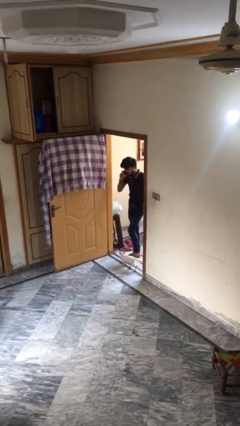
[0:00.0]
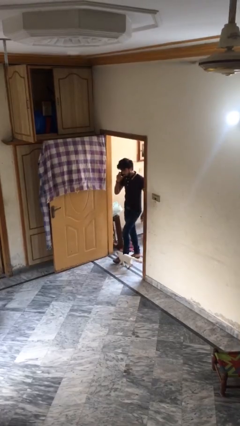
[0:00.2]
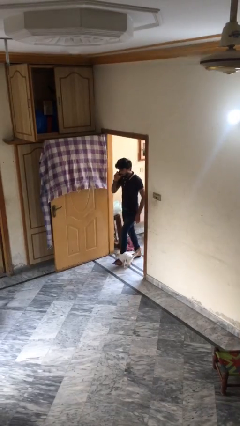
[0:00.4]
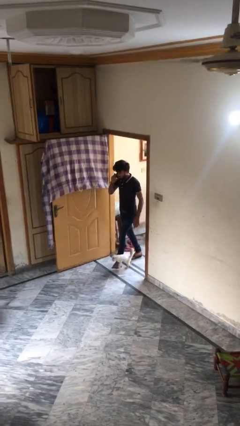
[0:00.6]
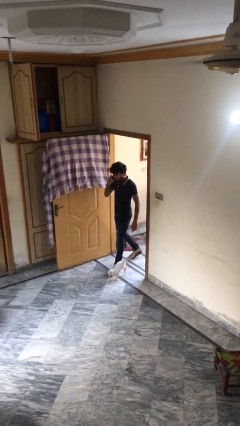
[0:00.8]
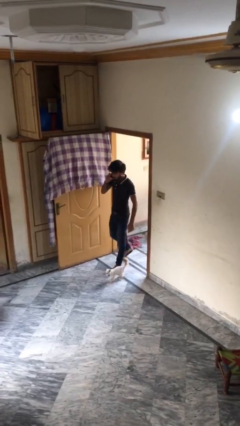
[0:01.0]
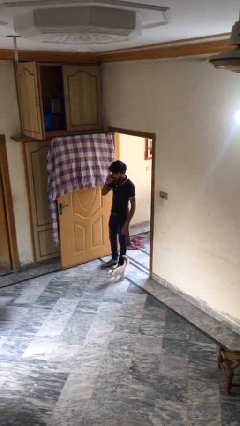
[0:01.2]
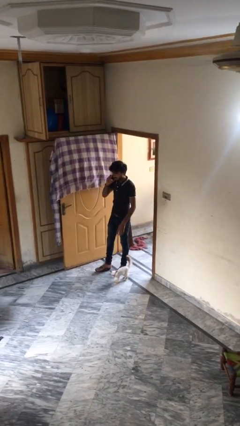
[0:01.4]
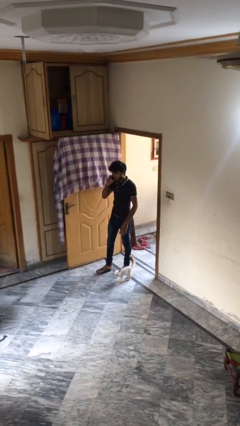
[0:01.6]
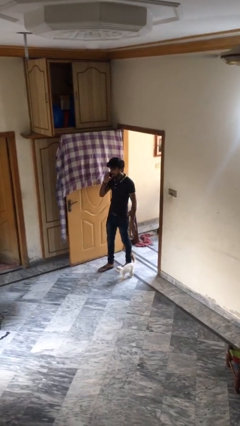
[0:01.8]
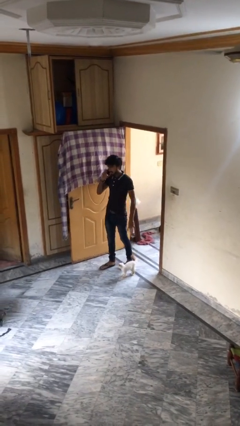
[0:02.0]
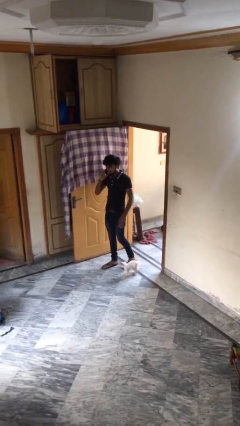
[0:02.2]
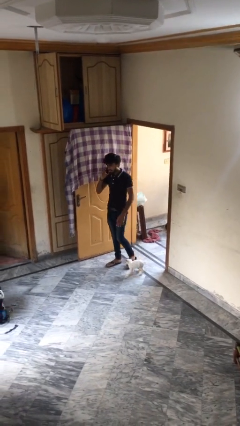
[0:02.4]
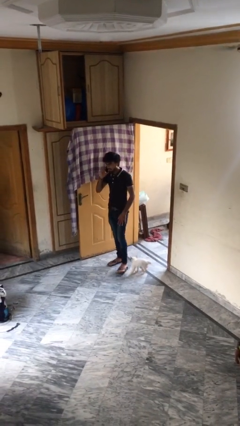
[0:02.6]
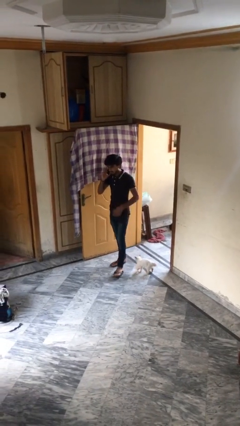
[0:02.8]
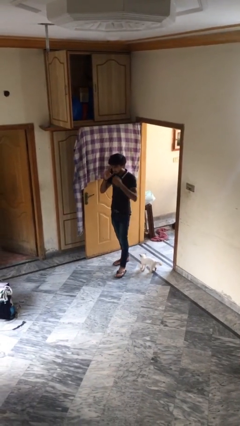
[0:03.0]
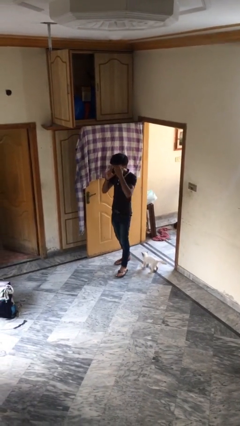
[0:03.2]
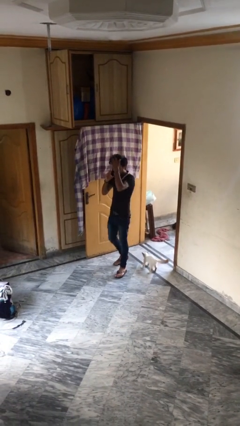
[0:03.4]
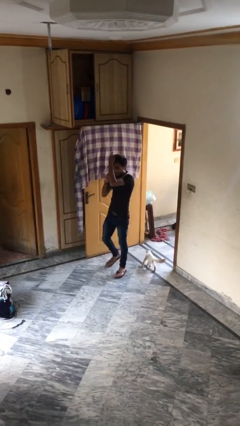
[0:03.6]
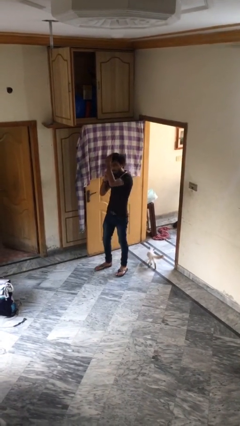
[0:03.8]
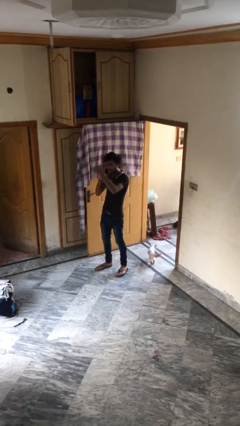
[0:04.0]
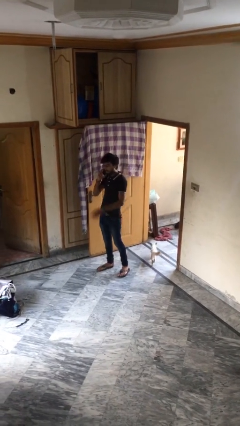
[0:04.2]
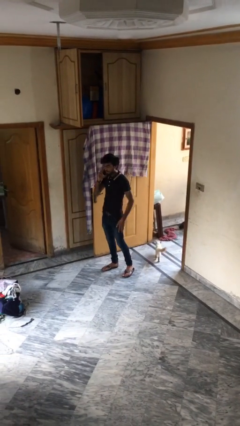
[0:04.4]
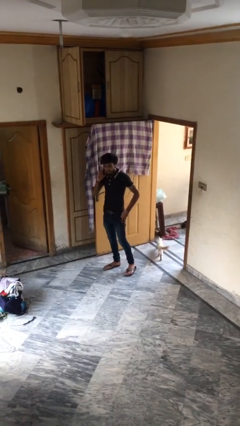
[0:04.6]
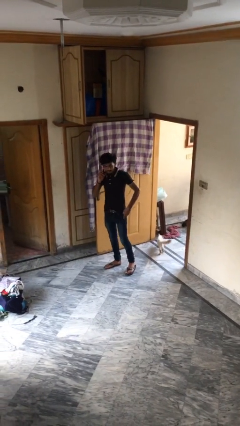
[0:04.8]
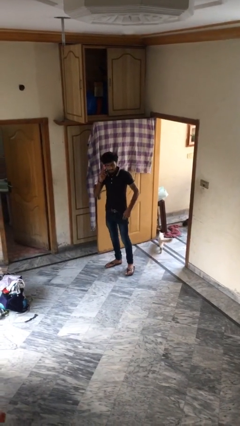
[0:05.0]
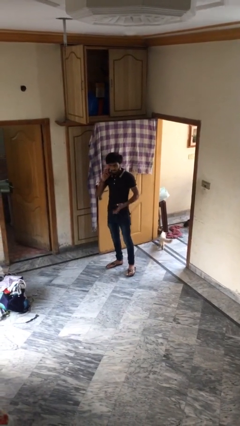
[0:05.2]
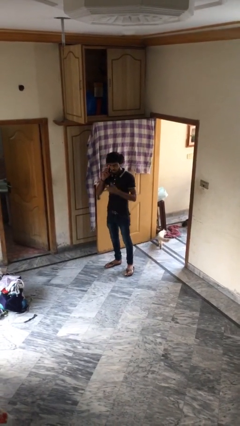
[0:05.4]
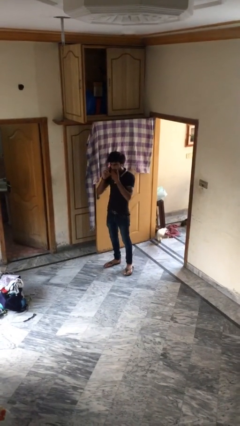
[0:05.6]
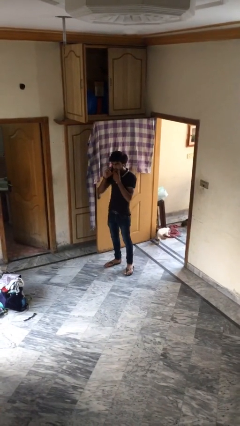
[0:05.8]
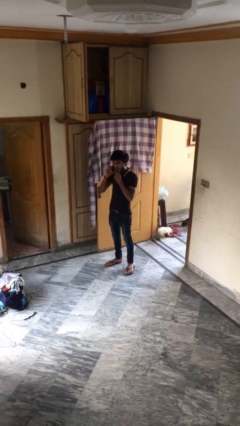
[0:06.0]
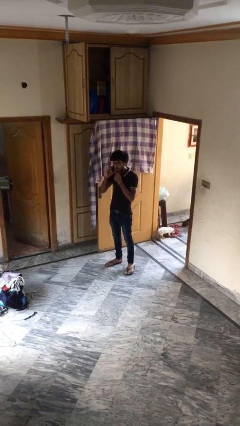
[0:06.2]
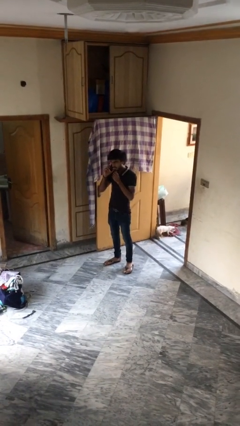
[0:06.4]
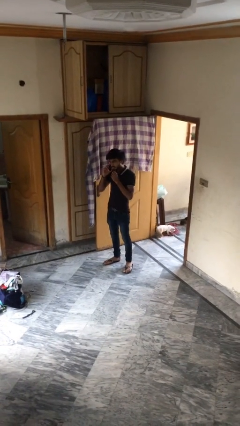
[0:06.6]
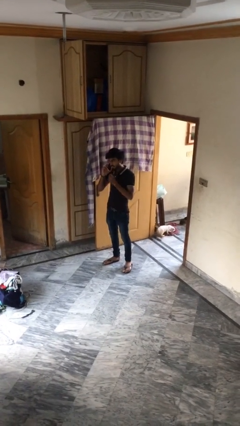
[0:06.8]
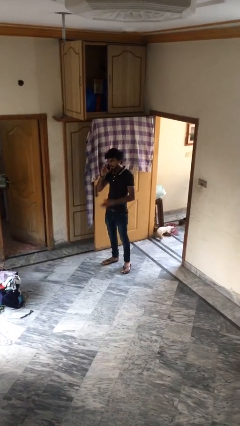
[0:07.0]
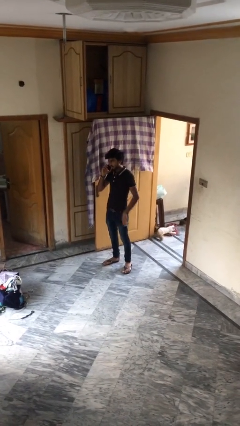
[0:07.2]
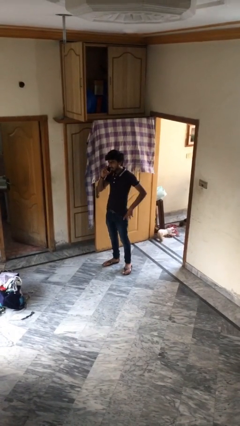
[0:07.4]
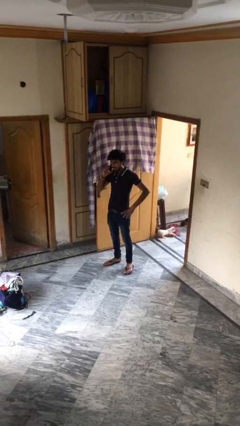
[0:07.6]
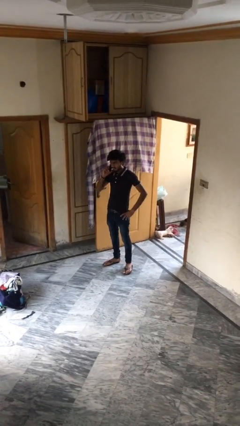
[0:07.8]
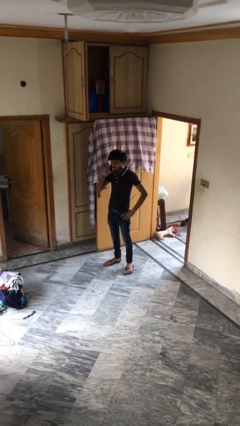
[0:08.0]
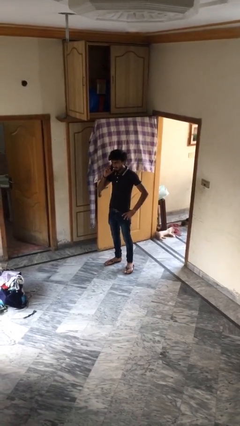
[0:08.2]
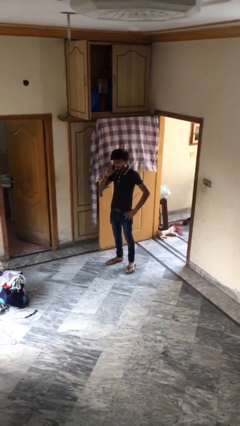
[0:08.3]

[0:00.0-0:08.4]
person enters scene through structure

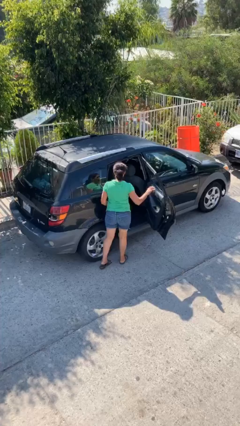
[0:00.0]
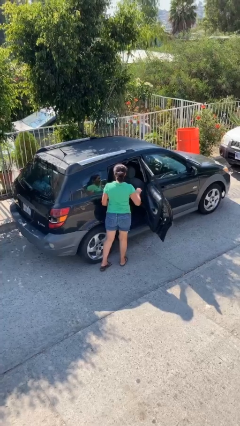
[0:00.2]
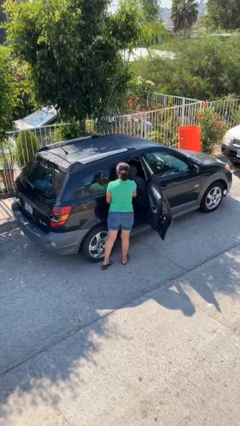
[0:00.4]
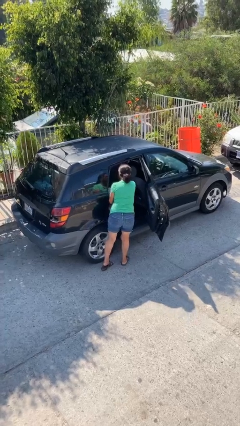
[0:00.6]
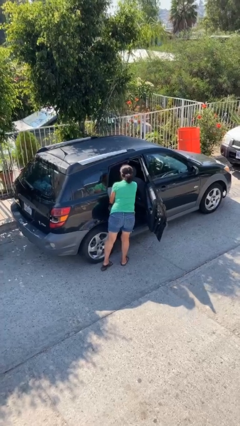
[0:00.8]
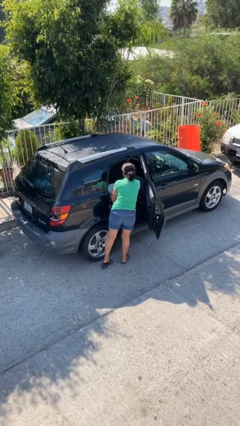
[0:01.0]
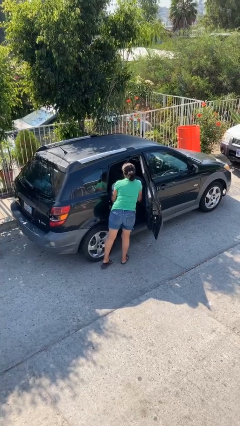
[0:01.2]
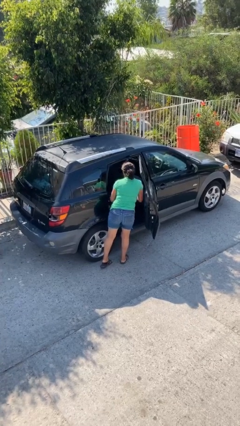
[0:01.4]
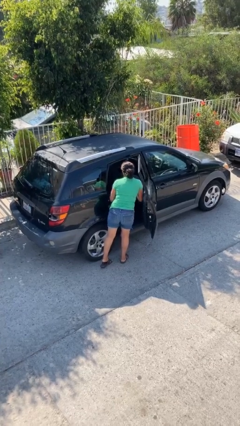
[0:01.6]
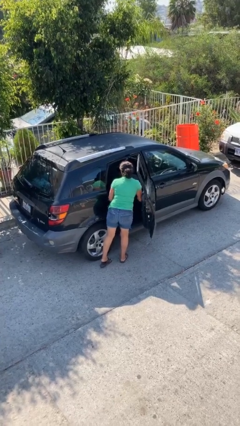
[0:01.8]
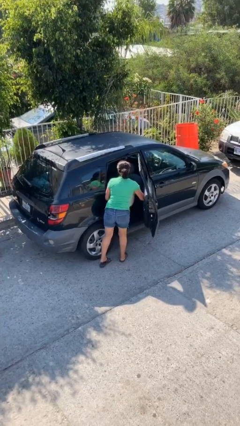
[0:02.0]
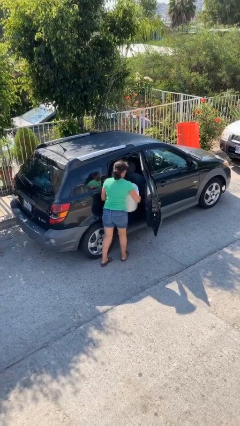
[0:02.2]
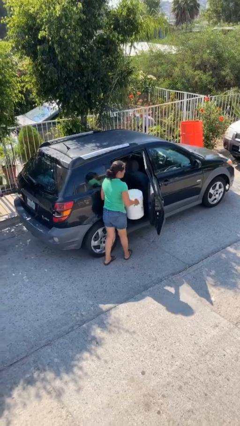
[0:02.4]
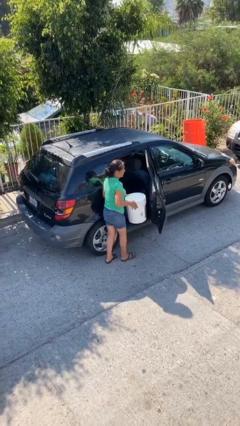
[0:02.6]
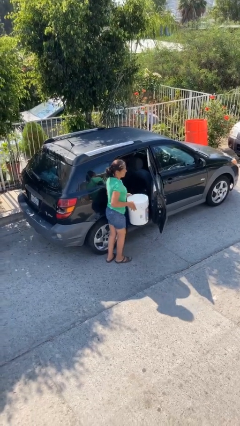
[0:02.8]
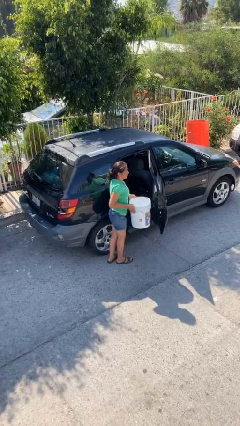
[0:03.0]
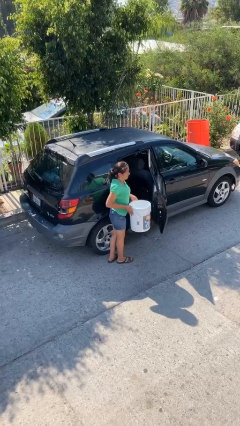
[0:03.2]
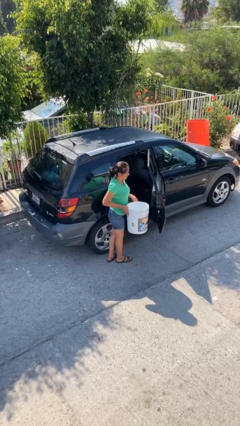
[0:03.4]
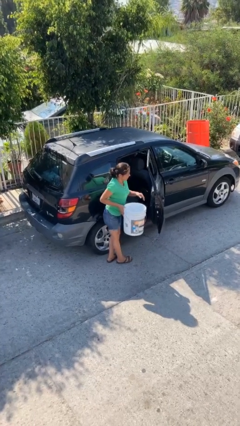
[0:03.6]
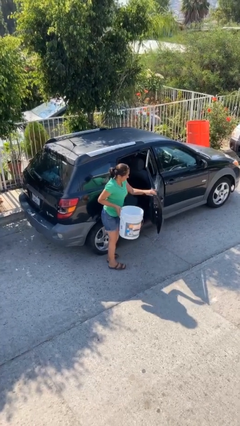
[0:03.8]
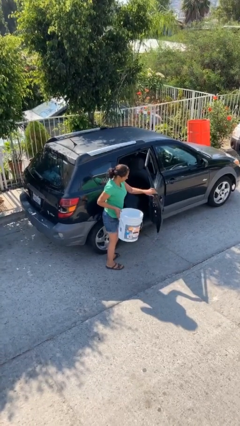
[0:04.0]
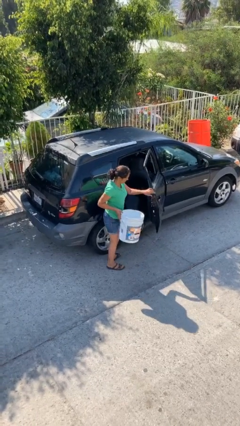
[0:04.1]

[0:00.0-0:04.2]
person unloads car

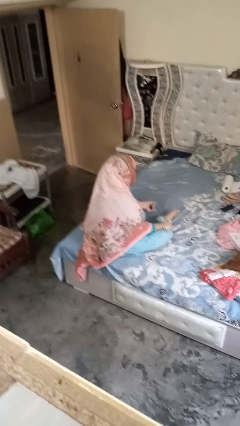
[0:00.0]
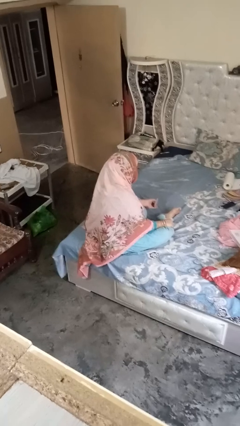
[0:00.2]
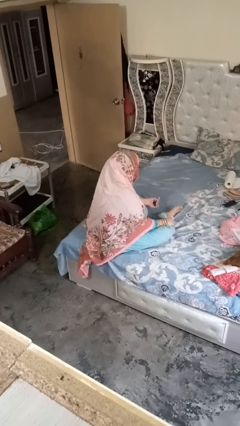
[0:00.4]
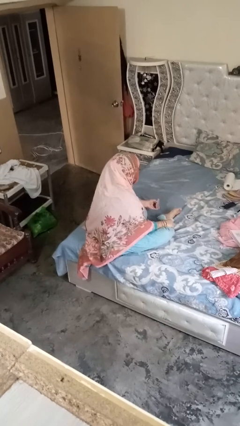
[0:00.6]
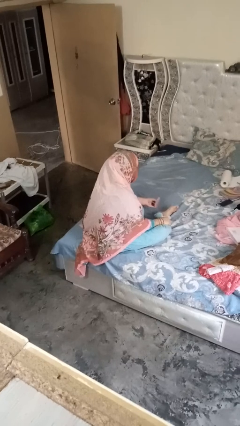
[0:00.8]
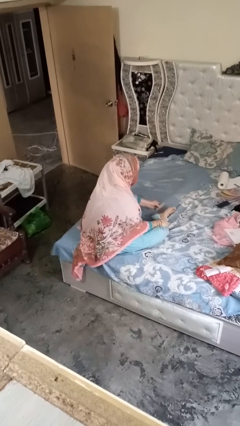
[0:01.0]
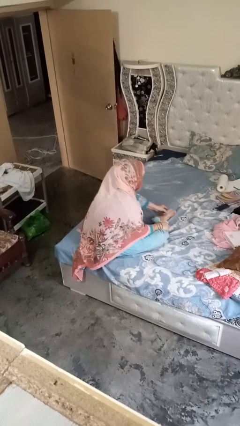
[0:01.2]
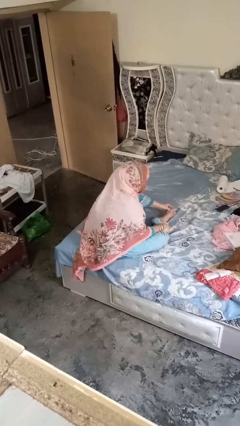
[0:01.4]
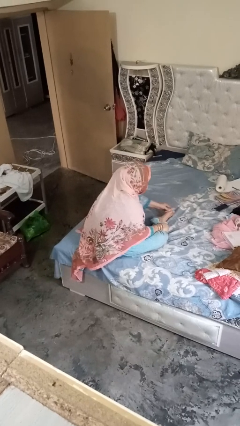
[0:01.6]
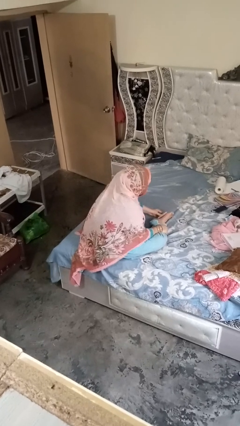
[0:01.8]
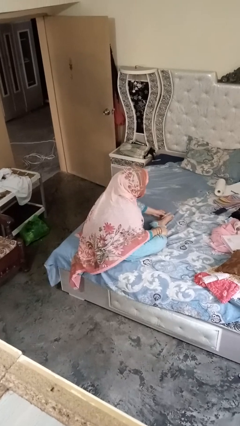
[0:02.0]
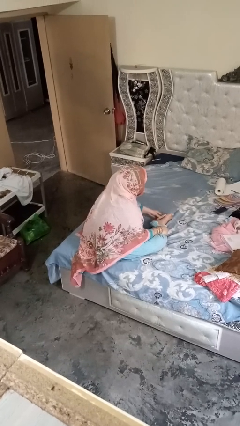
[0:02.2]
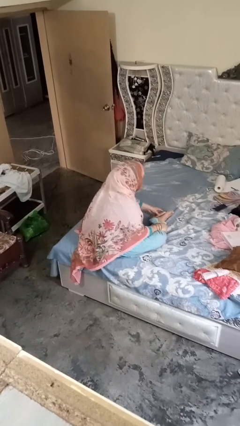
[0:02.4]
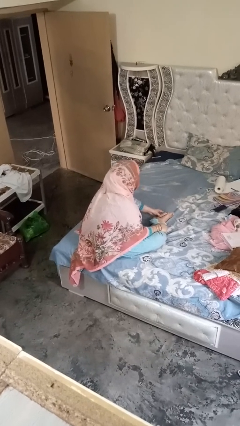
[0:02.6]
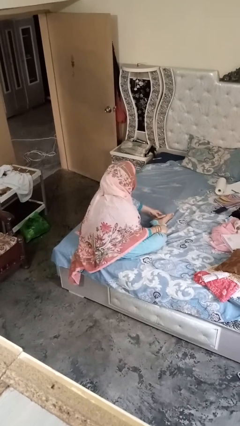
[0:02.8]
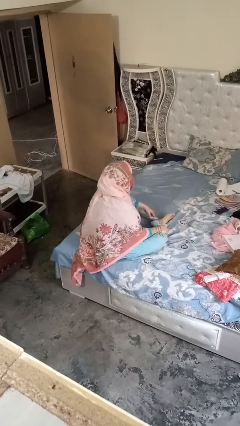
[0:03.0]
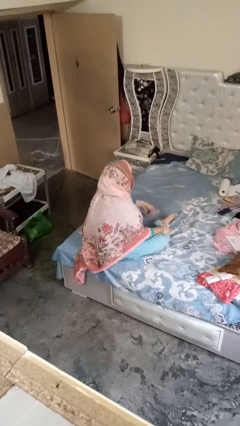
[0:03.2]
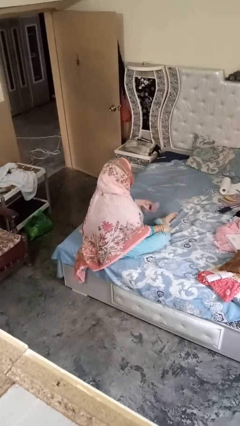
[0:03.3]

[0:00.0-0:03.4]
person rubs foot

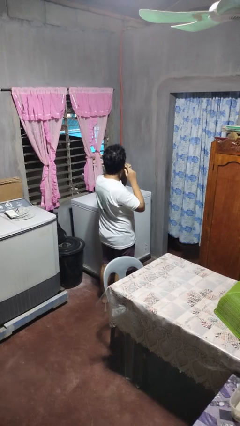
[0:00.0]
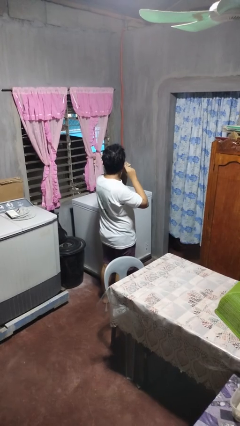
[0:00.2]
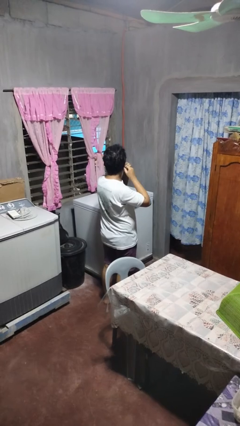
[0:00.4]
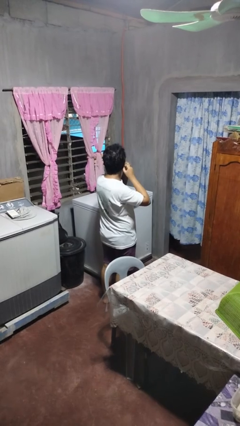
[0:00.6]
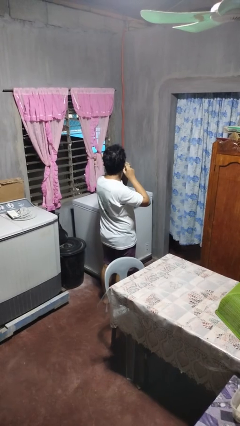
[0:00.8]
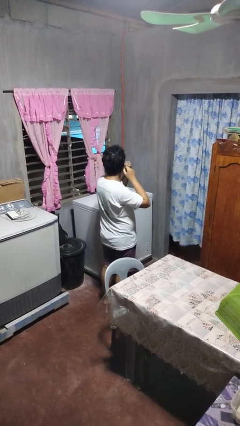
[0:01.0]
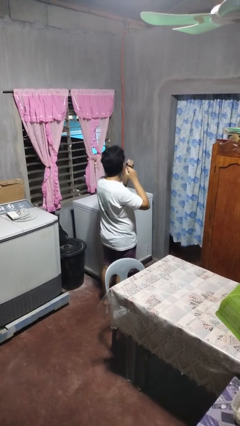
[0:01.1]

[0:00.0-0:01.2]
person takes off earrings

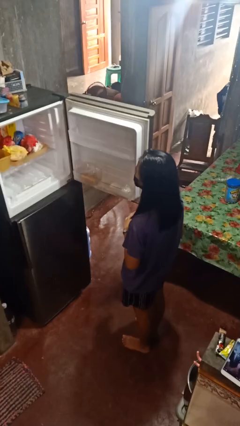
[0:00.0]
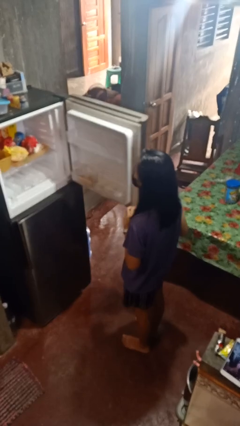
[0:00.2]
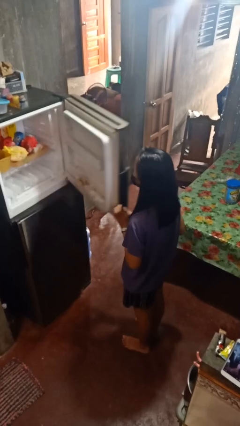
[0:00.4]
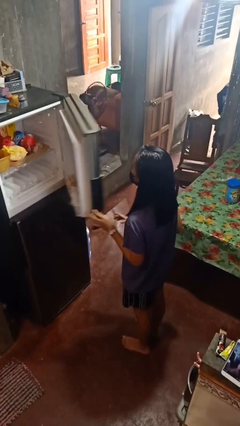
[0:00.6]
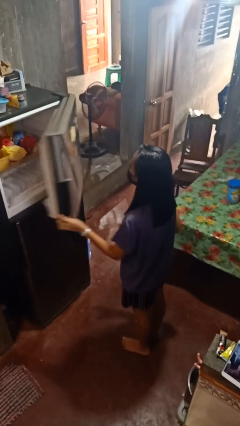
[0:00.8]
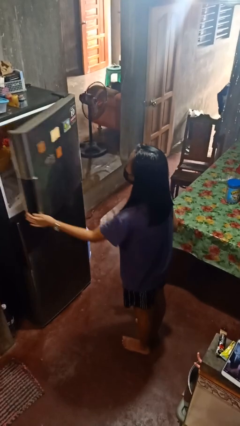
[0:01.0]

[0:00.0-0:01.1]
person closes refrigerator
